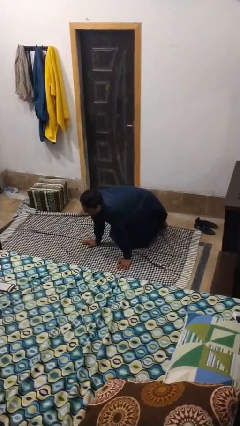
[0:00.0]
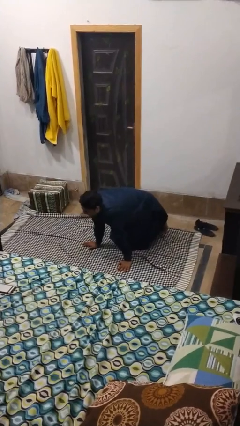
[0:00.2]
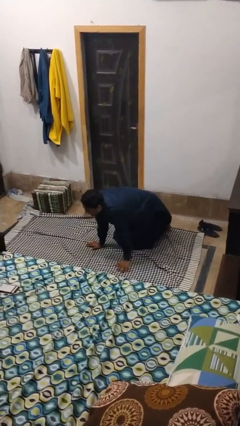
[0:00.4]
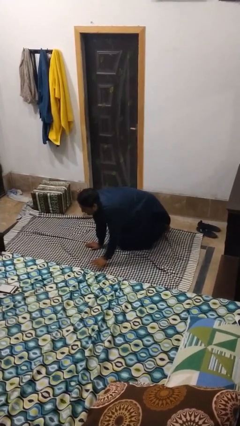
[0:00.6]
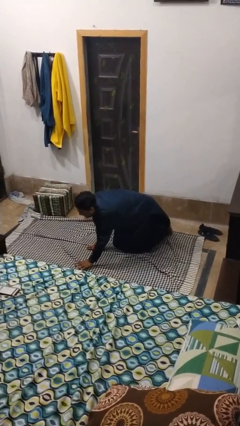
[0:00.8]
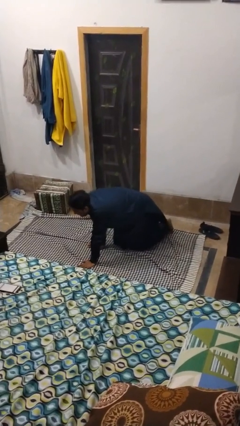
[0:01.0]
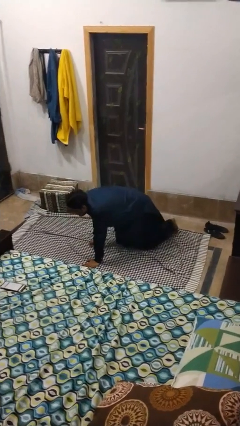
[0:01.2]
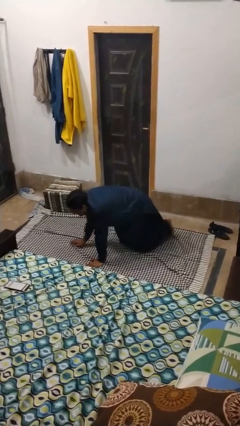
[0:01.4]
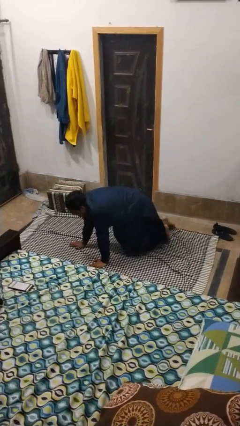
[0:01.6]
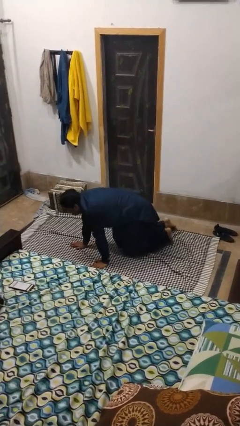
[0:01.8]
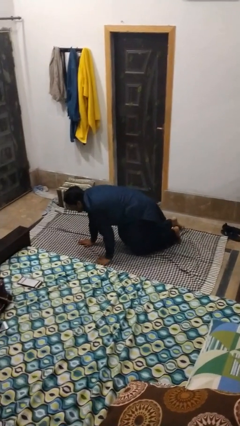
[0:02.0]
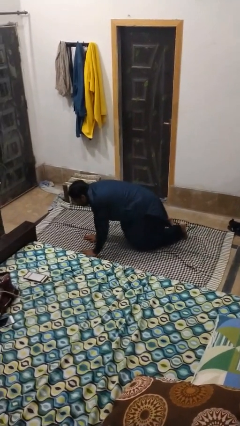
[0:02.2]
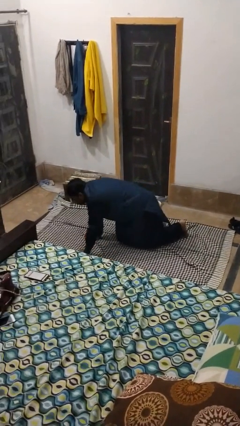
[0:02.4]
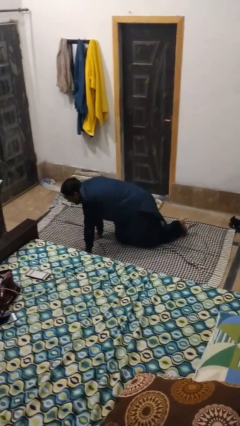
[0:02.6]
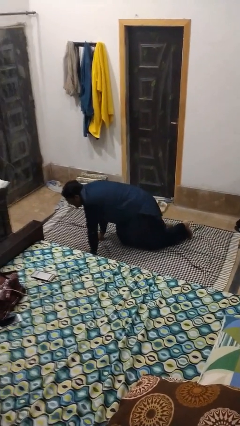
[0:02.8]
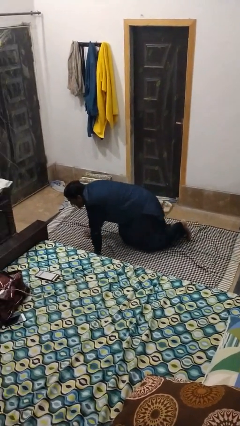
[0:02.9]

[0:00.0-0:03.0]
person crawls

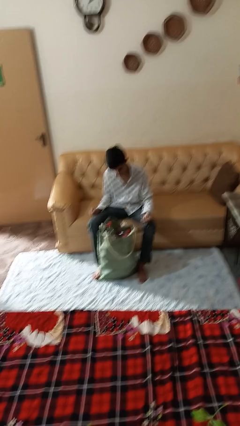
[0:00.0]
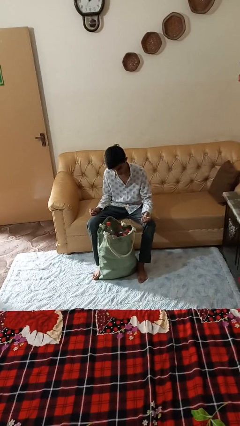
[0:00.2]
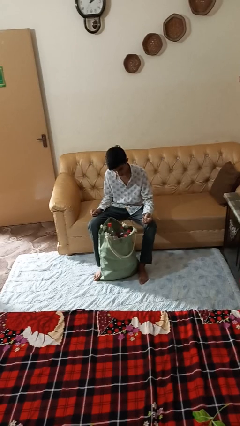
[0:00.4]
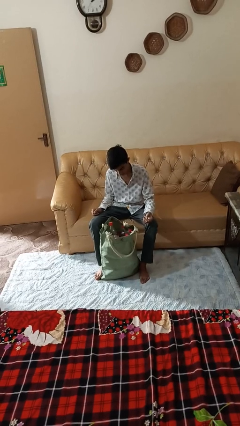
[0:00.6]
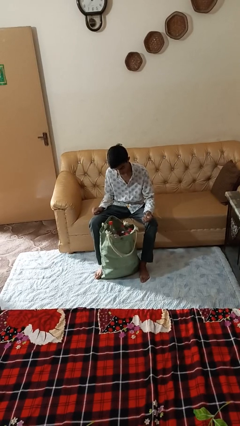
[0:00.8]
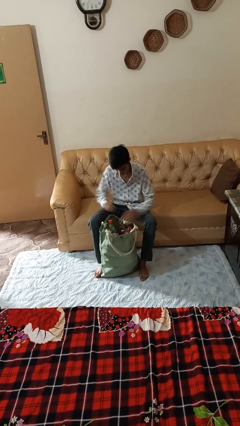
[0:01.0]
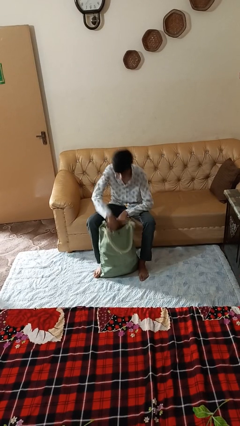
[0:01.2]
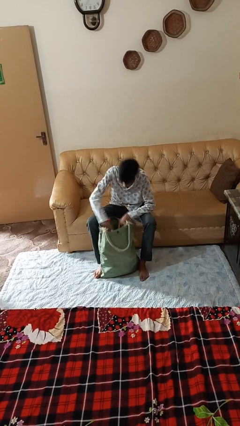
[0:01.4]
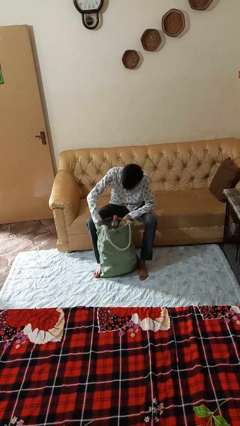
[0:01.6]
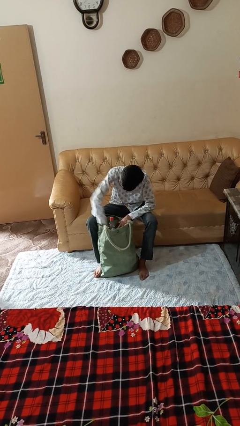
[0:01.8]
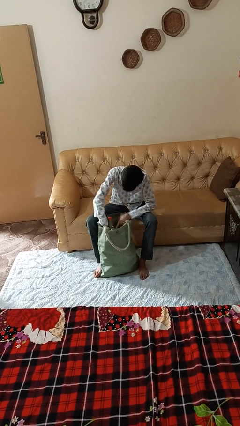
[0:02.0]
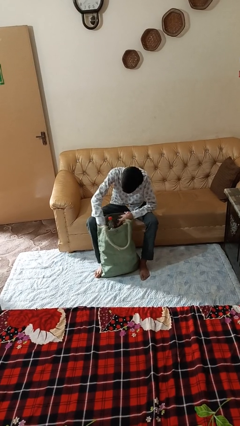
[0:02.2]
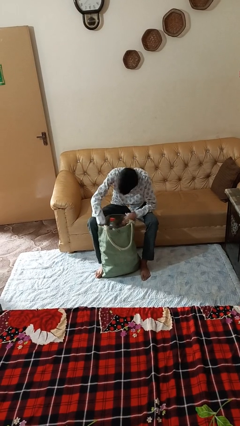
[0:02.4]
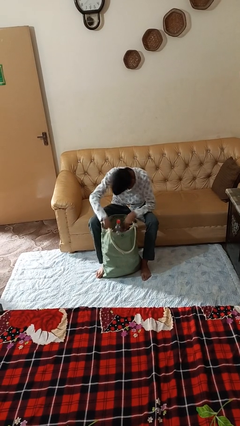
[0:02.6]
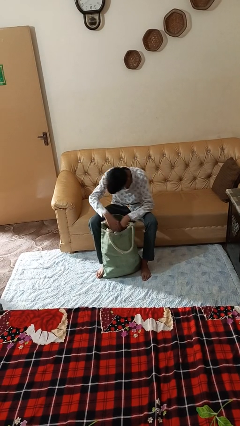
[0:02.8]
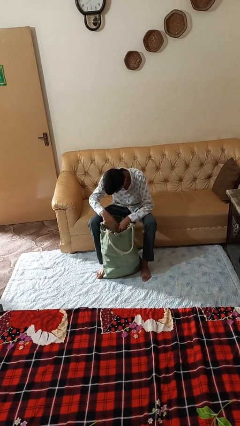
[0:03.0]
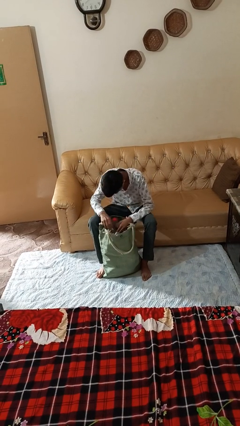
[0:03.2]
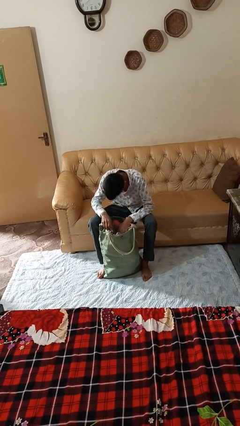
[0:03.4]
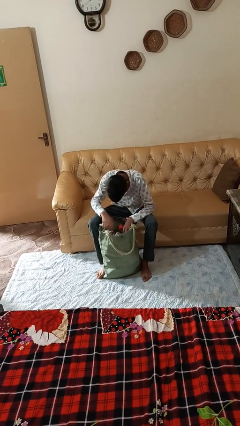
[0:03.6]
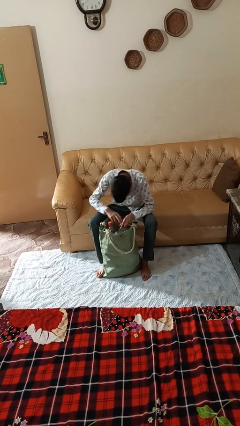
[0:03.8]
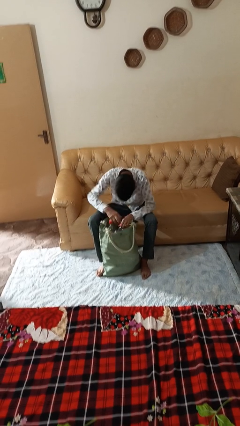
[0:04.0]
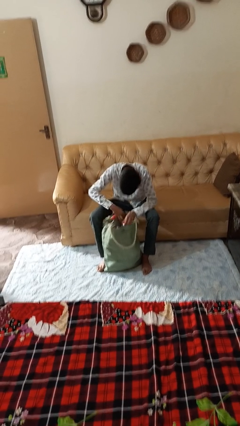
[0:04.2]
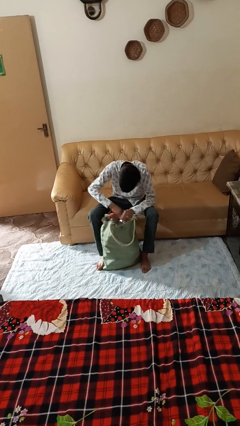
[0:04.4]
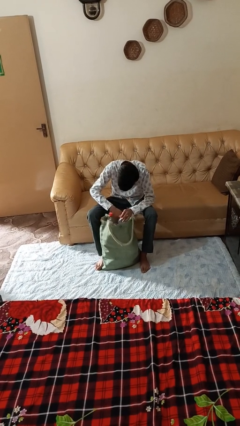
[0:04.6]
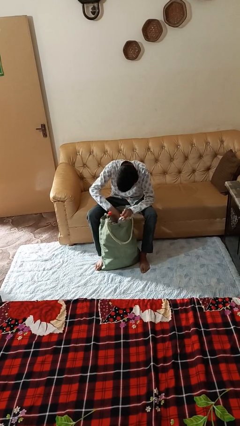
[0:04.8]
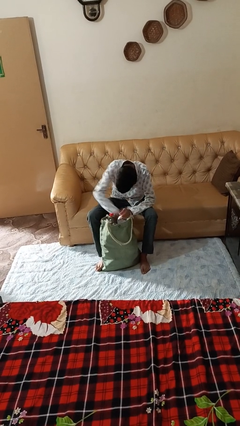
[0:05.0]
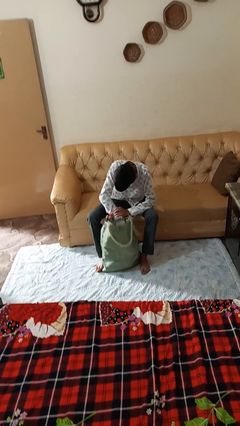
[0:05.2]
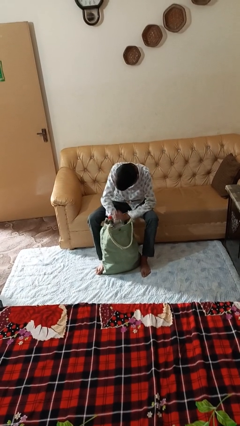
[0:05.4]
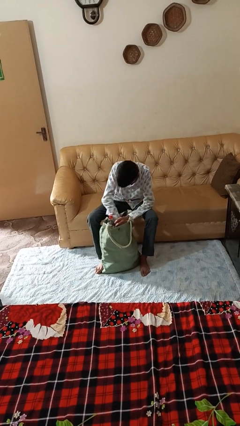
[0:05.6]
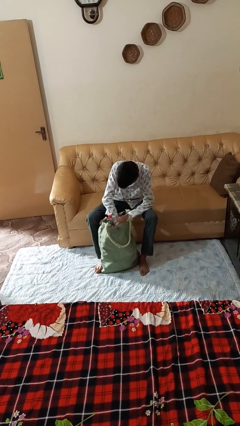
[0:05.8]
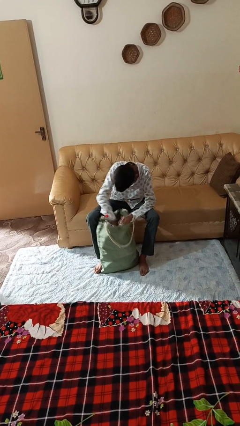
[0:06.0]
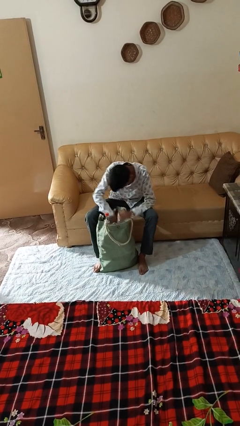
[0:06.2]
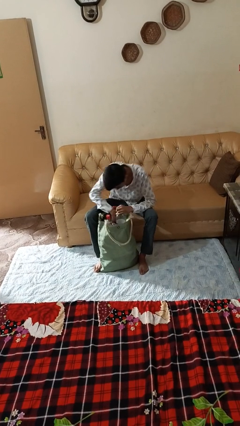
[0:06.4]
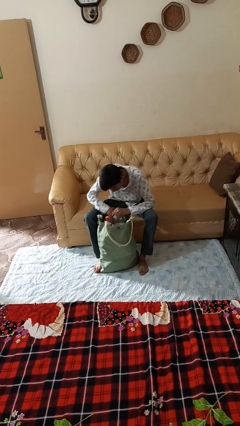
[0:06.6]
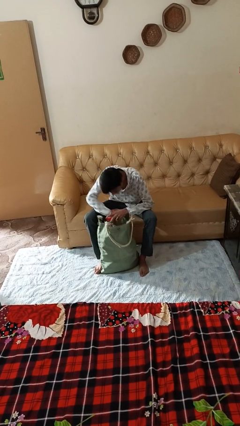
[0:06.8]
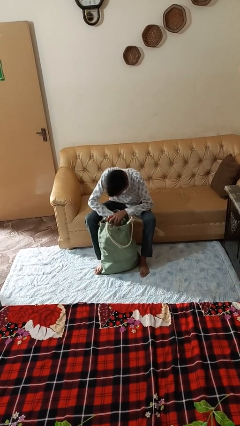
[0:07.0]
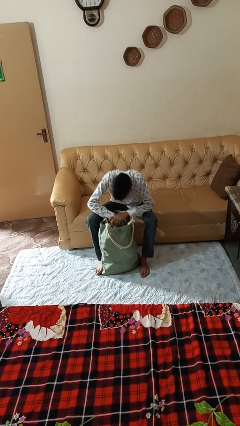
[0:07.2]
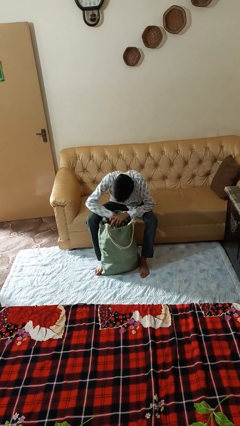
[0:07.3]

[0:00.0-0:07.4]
person searches in bag

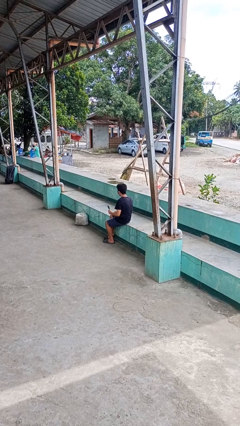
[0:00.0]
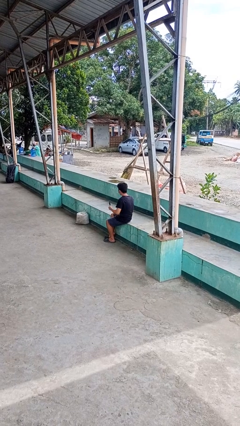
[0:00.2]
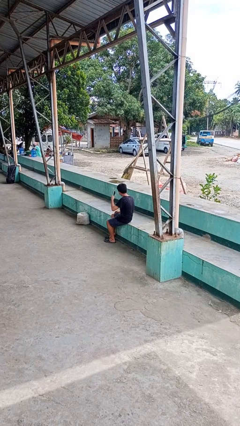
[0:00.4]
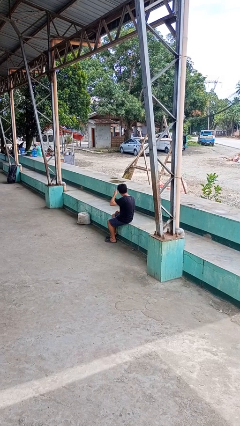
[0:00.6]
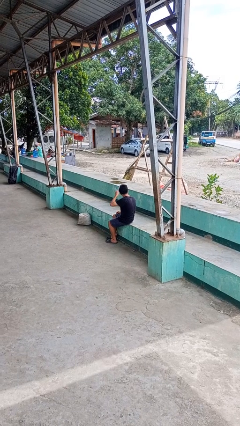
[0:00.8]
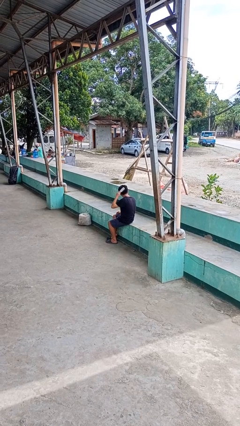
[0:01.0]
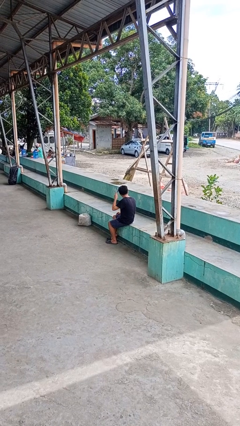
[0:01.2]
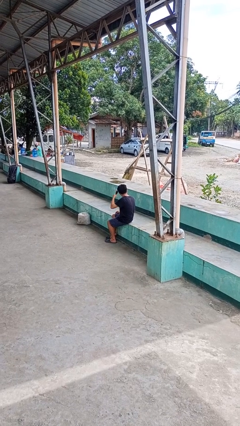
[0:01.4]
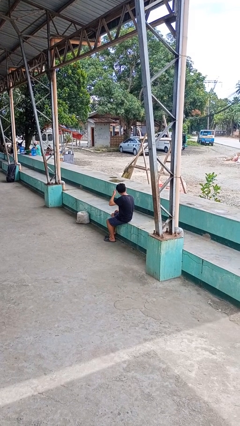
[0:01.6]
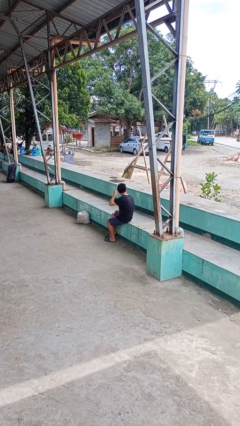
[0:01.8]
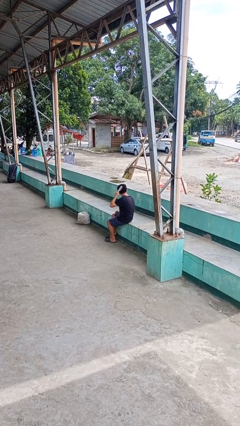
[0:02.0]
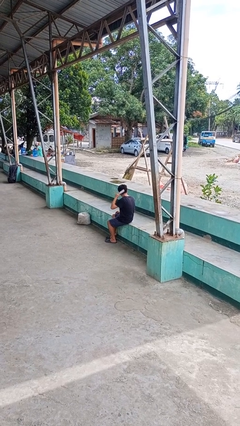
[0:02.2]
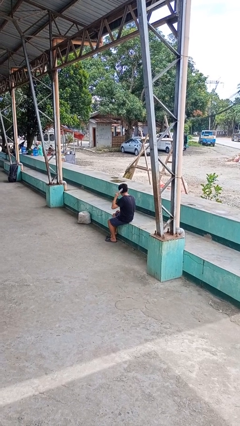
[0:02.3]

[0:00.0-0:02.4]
person brushes hair

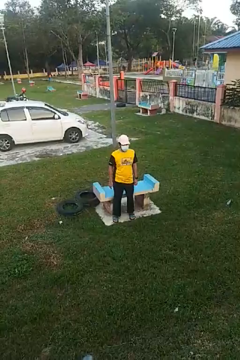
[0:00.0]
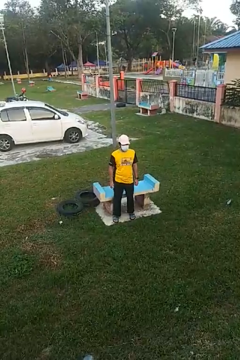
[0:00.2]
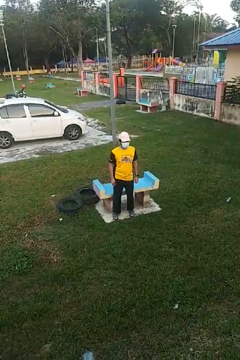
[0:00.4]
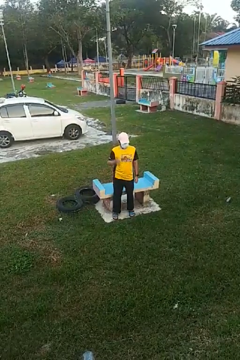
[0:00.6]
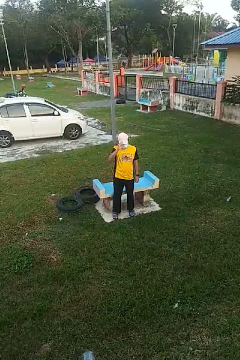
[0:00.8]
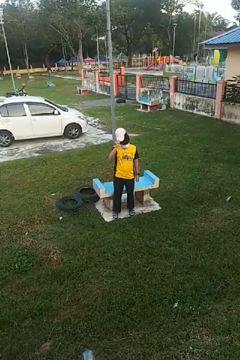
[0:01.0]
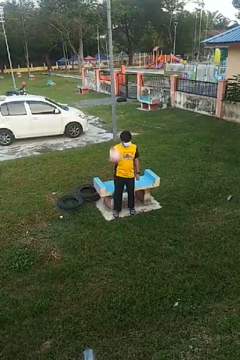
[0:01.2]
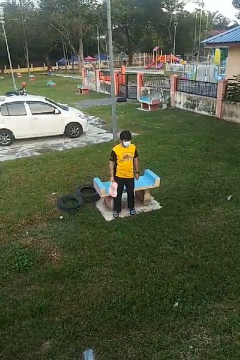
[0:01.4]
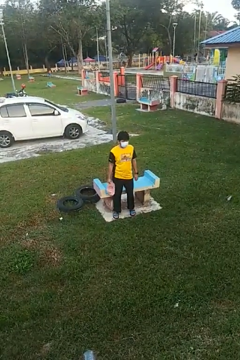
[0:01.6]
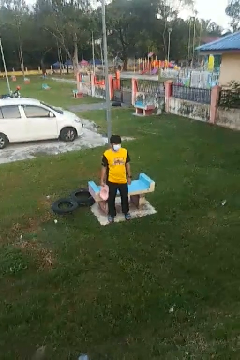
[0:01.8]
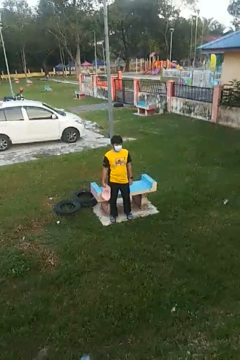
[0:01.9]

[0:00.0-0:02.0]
person takes off hat

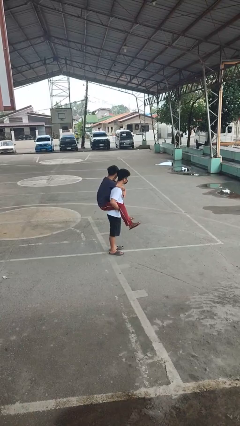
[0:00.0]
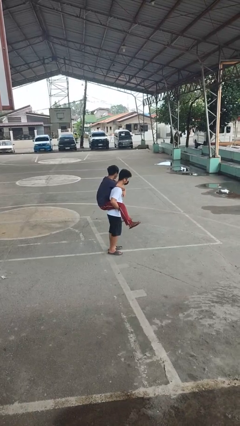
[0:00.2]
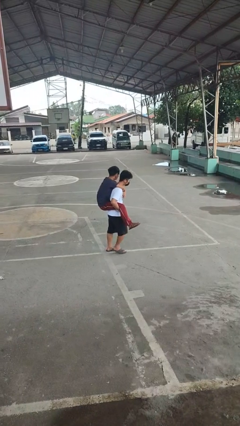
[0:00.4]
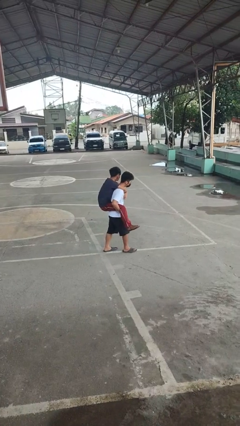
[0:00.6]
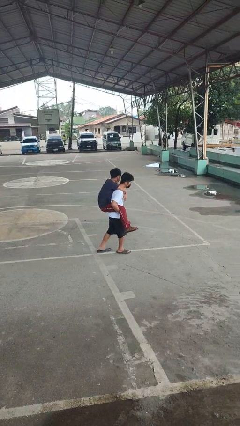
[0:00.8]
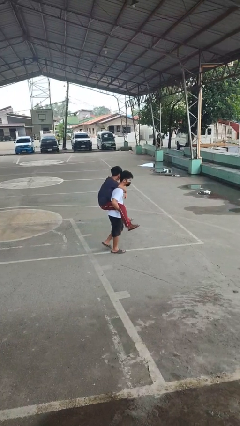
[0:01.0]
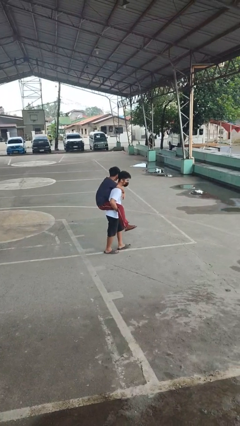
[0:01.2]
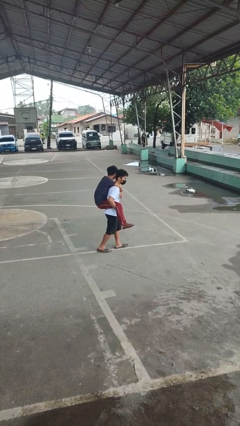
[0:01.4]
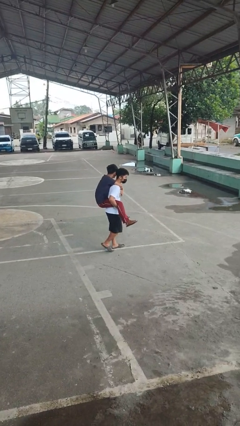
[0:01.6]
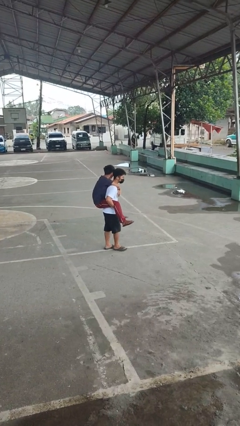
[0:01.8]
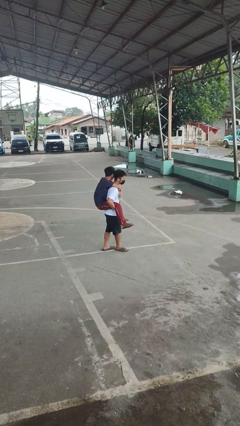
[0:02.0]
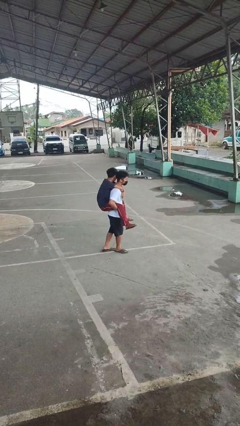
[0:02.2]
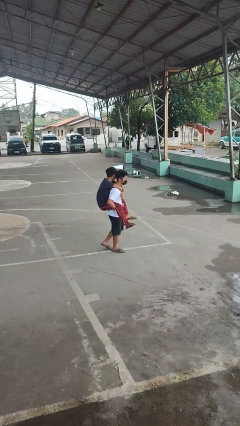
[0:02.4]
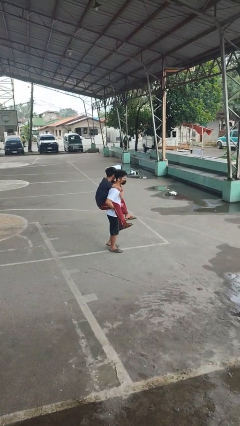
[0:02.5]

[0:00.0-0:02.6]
person carries person on back

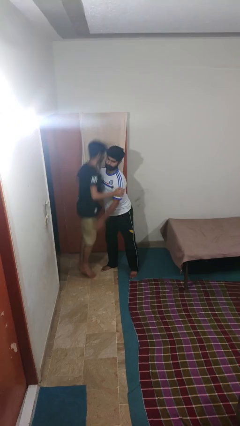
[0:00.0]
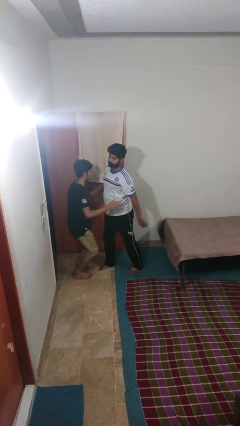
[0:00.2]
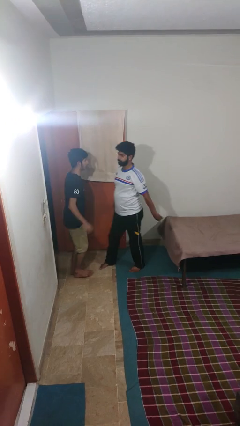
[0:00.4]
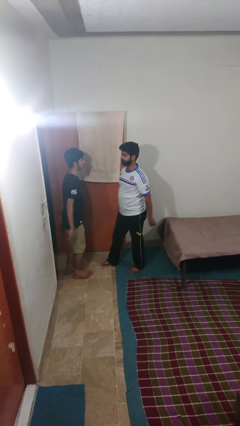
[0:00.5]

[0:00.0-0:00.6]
person puts down person
